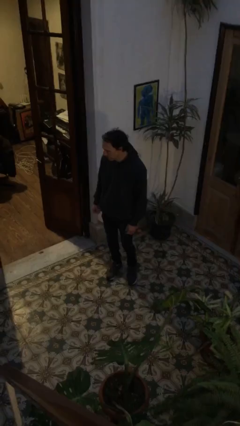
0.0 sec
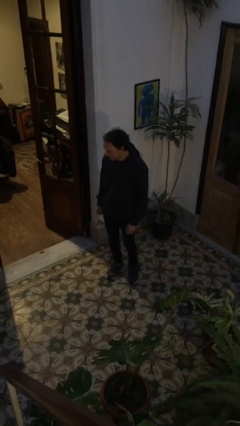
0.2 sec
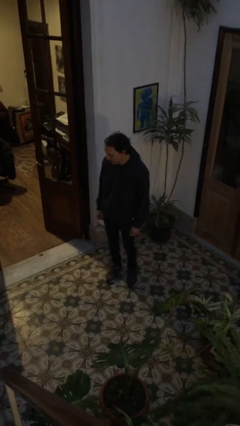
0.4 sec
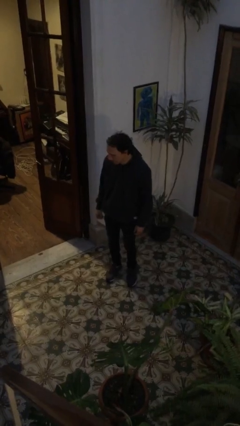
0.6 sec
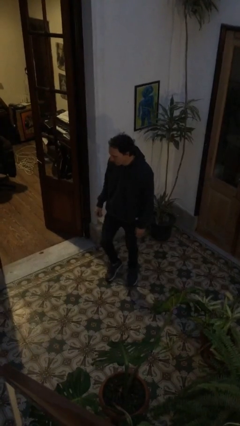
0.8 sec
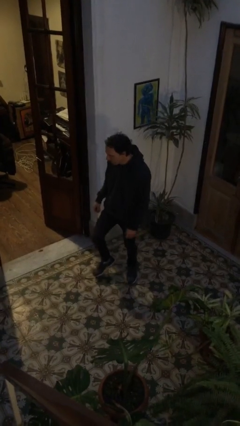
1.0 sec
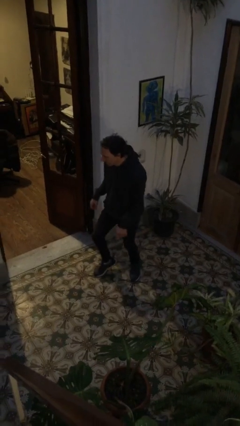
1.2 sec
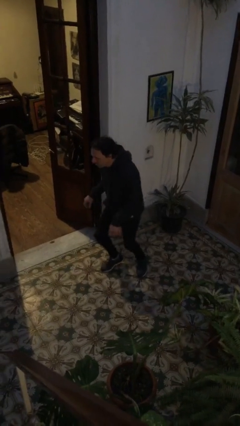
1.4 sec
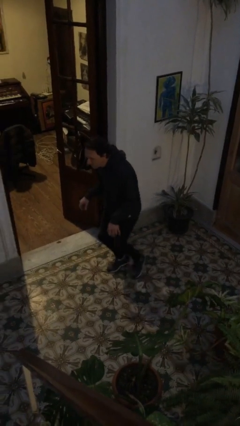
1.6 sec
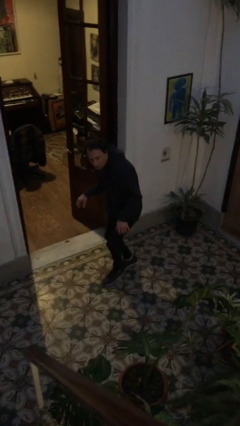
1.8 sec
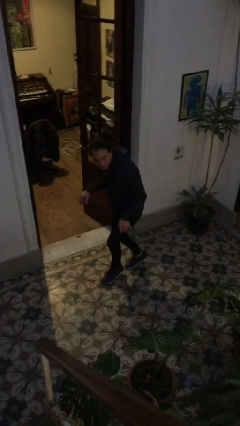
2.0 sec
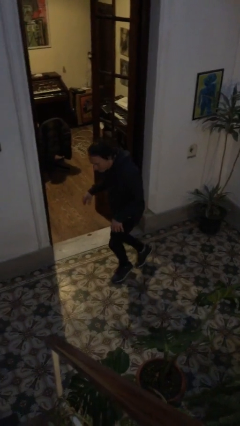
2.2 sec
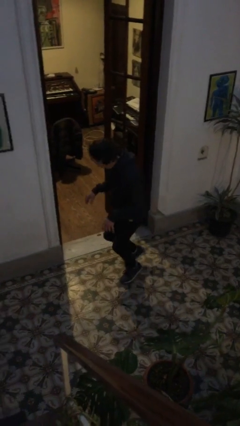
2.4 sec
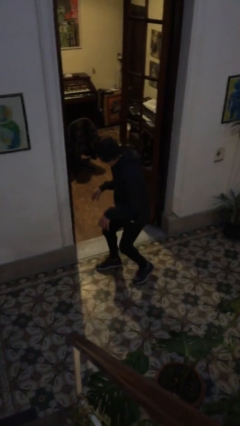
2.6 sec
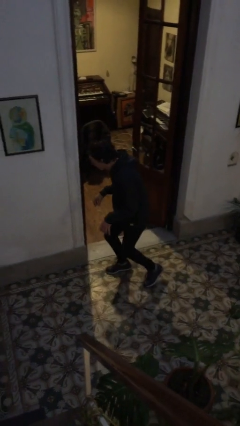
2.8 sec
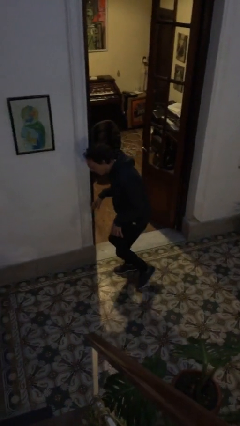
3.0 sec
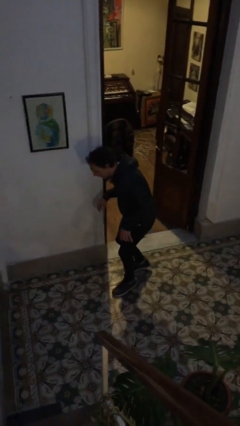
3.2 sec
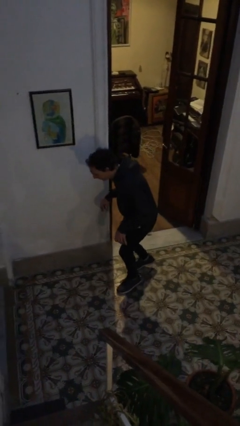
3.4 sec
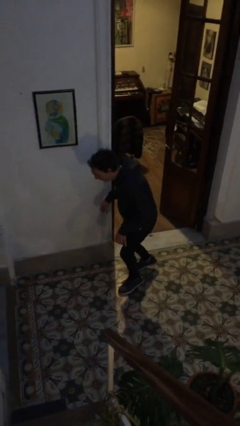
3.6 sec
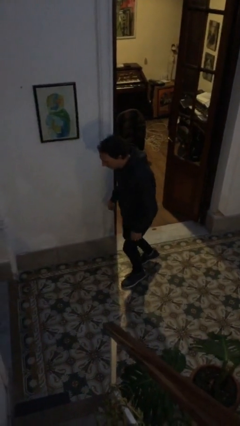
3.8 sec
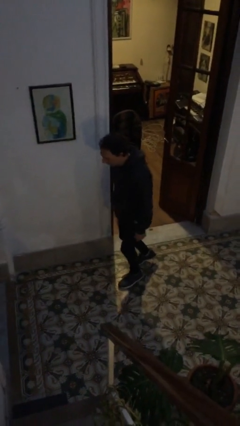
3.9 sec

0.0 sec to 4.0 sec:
person walks tiptoe

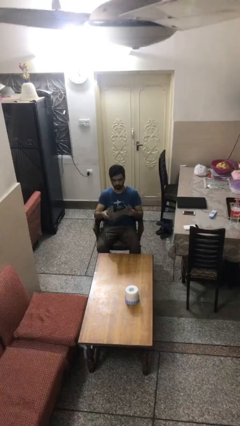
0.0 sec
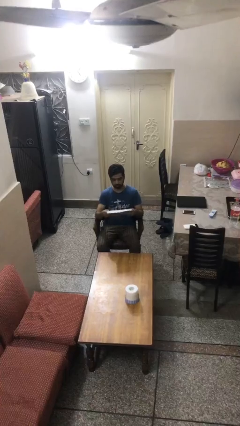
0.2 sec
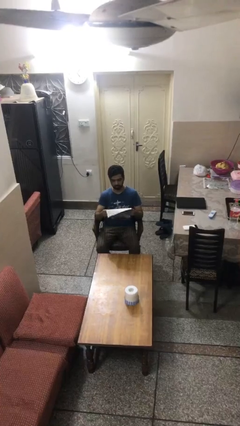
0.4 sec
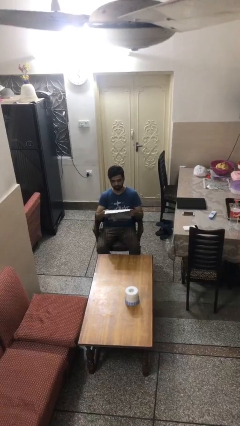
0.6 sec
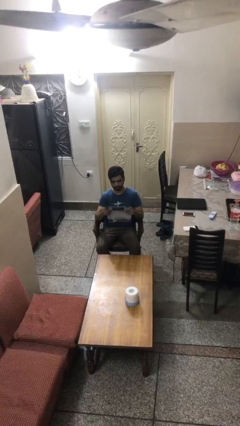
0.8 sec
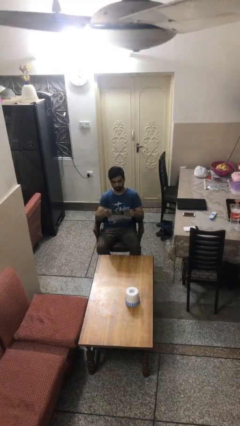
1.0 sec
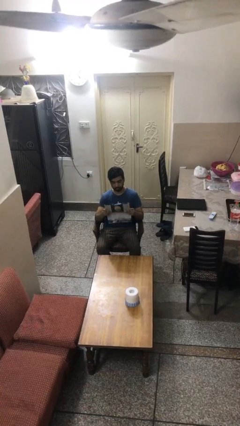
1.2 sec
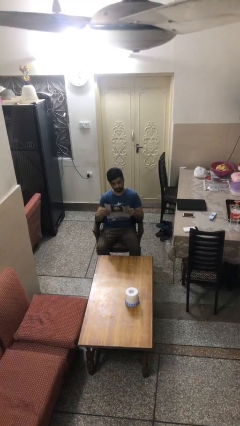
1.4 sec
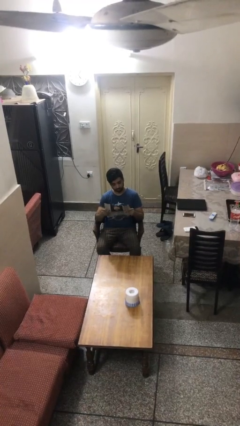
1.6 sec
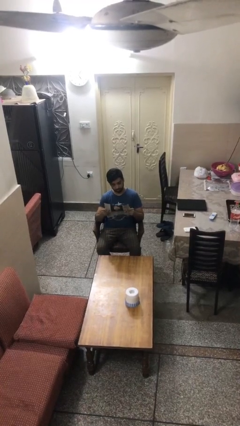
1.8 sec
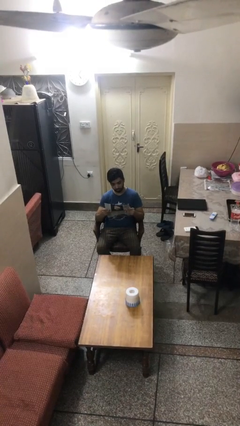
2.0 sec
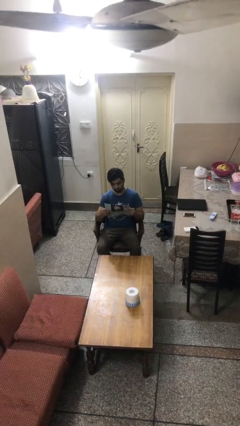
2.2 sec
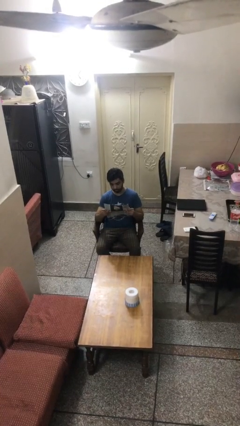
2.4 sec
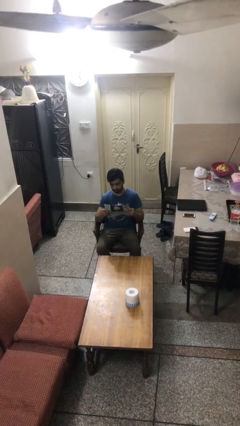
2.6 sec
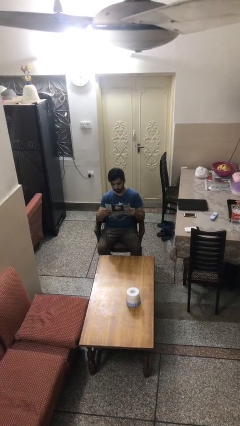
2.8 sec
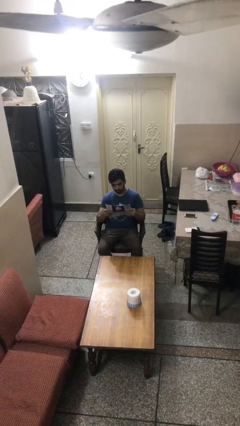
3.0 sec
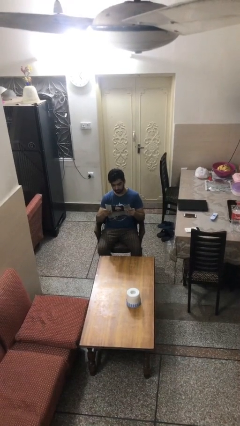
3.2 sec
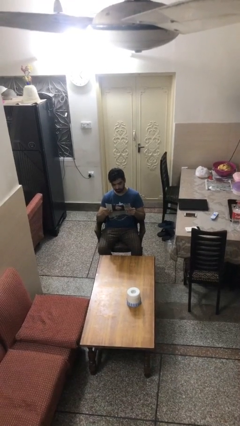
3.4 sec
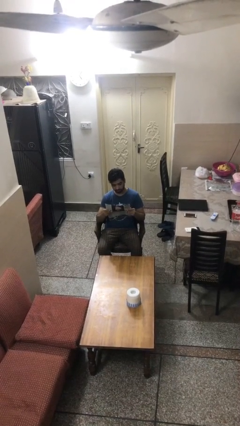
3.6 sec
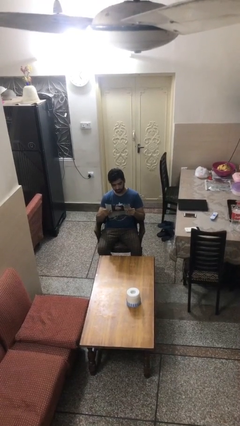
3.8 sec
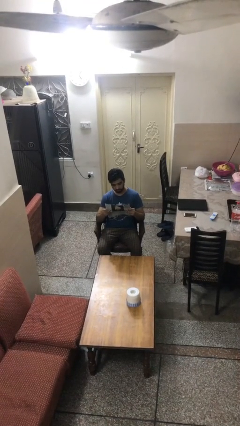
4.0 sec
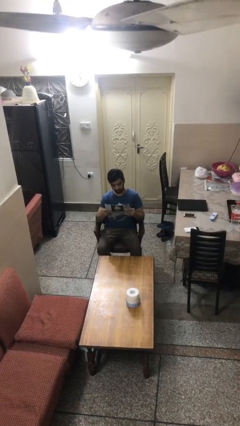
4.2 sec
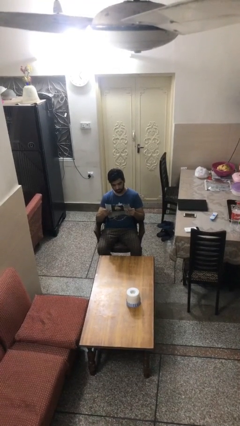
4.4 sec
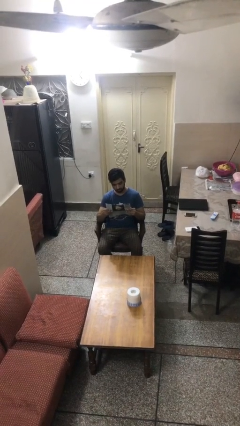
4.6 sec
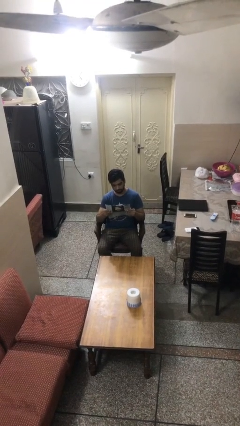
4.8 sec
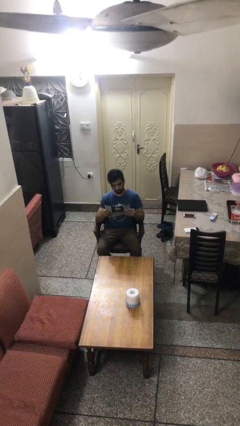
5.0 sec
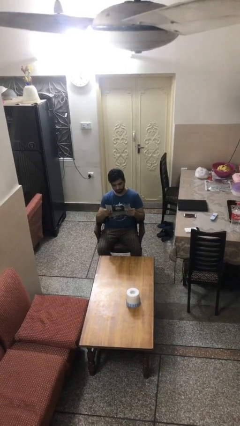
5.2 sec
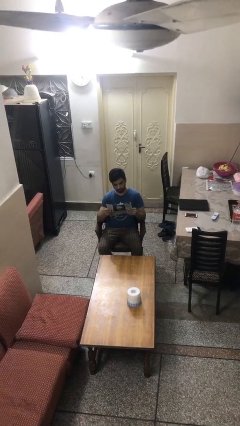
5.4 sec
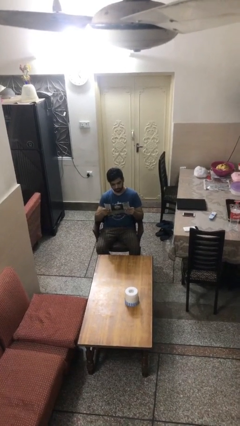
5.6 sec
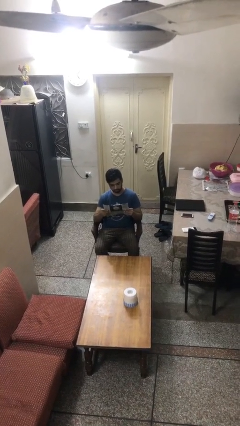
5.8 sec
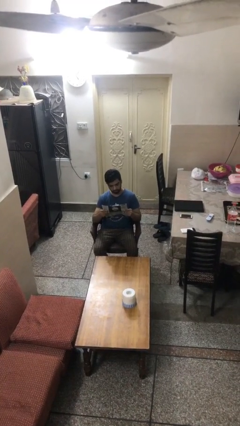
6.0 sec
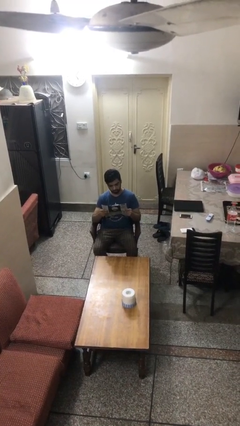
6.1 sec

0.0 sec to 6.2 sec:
person reads document

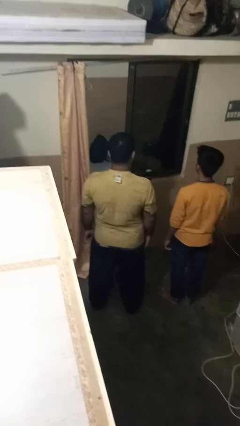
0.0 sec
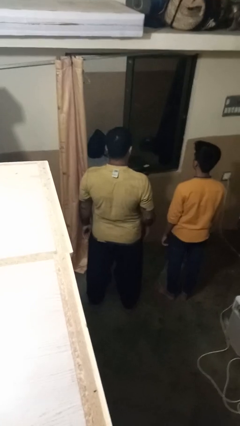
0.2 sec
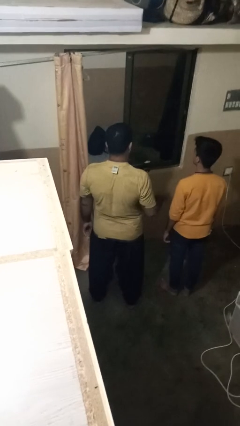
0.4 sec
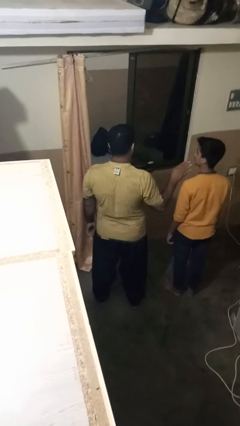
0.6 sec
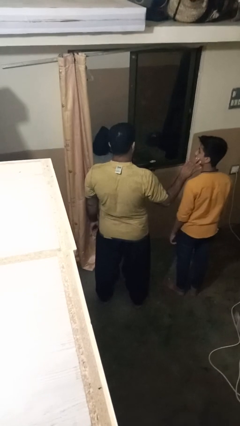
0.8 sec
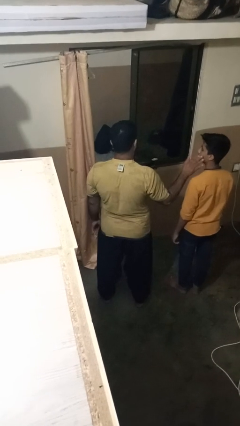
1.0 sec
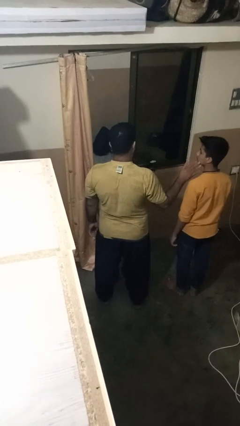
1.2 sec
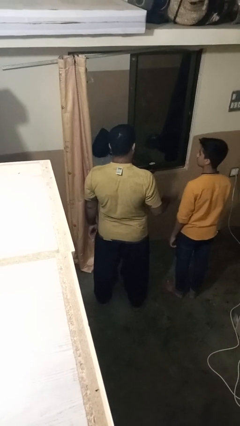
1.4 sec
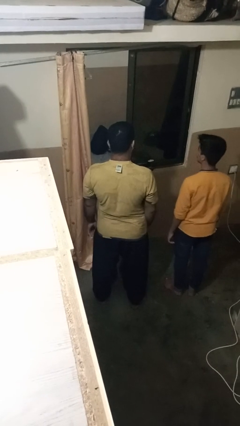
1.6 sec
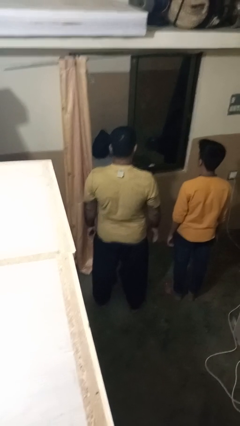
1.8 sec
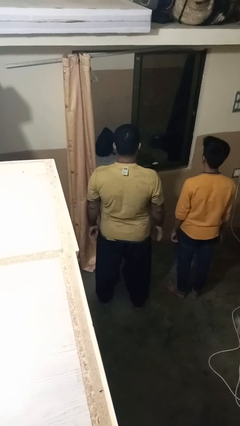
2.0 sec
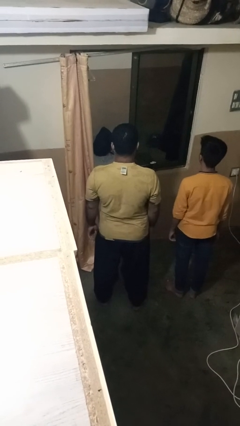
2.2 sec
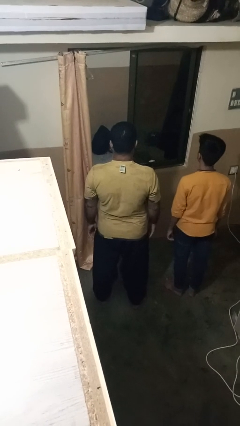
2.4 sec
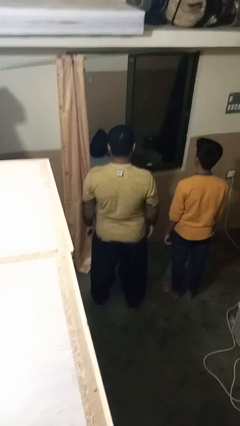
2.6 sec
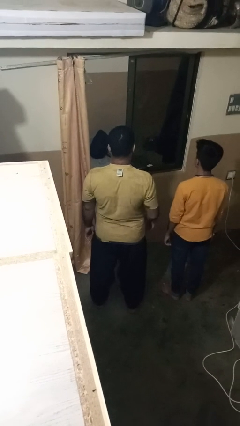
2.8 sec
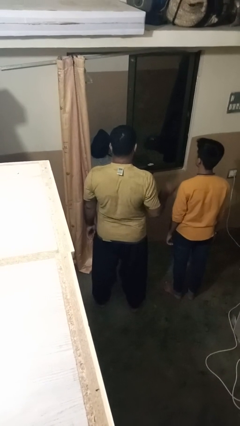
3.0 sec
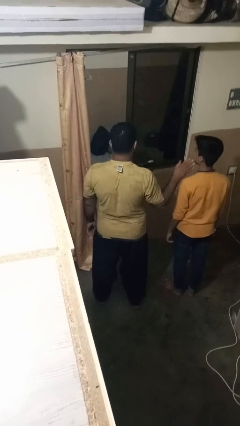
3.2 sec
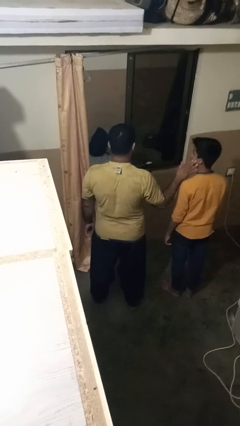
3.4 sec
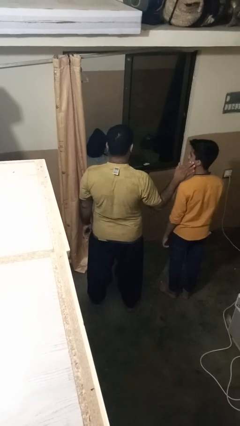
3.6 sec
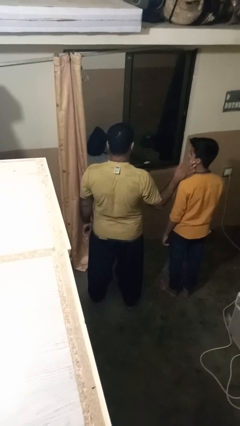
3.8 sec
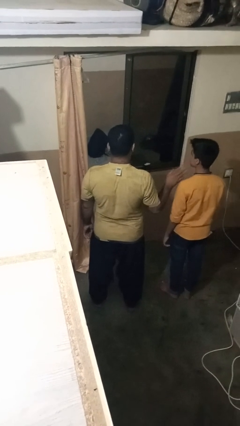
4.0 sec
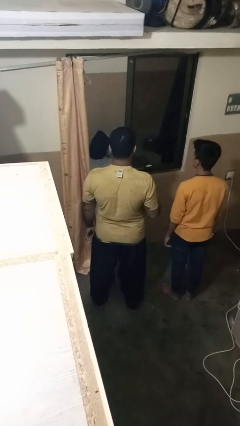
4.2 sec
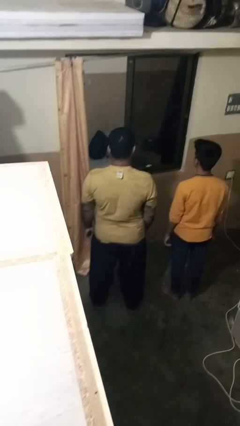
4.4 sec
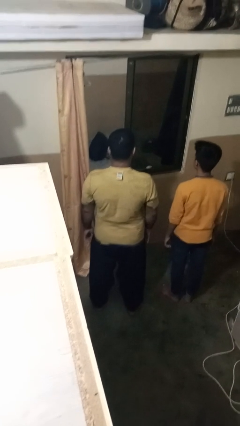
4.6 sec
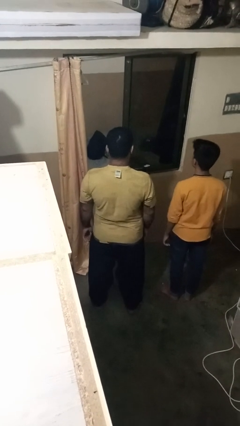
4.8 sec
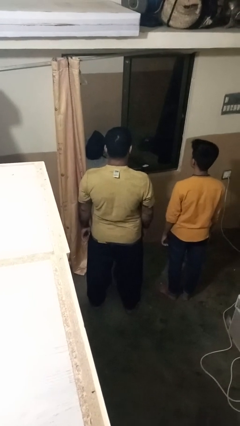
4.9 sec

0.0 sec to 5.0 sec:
person touches face of person

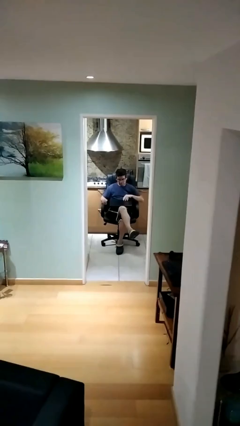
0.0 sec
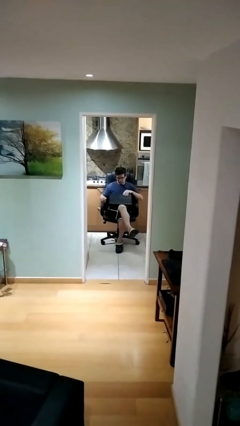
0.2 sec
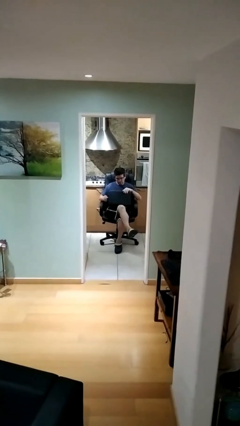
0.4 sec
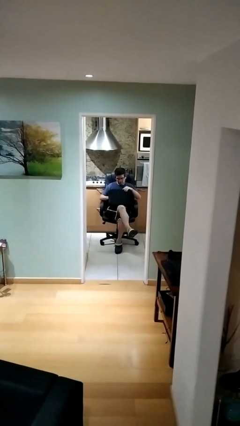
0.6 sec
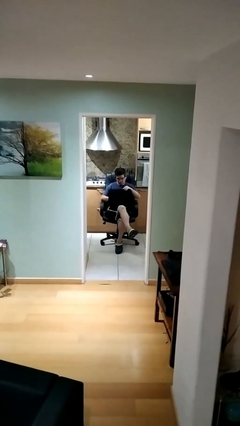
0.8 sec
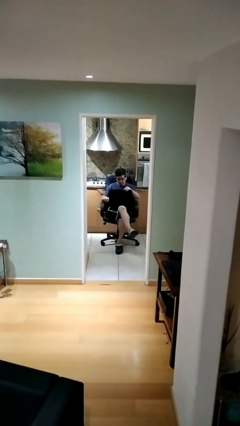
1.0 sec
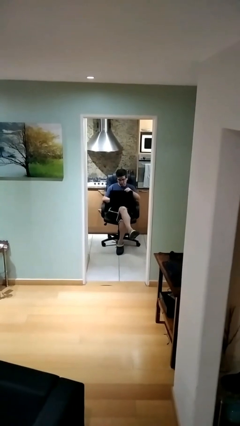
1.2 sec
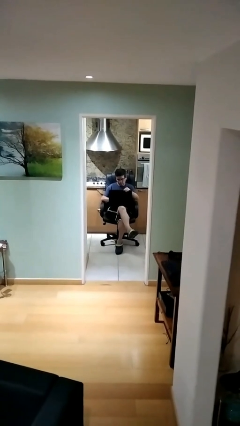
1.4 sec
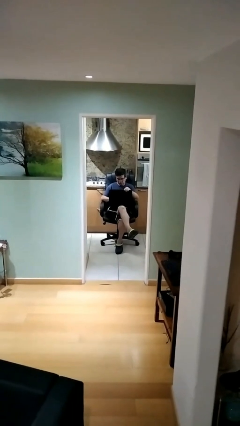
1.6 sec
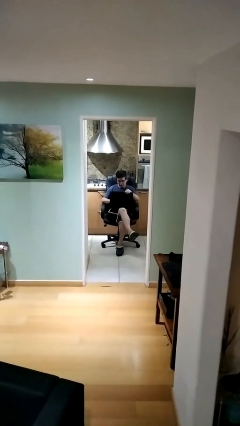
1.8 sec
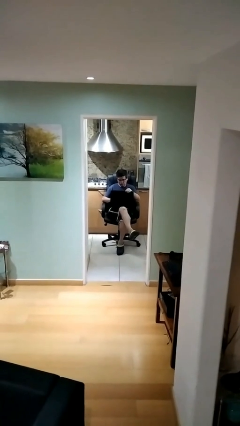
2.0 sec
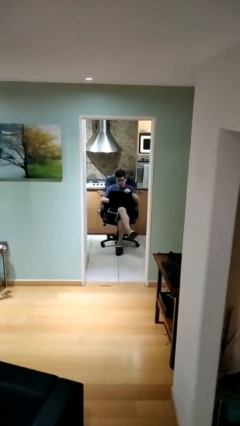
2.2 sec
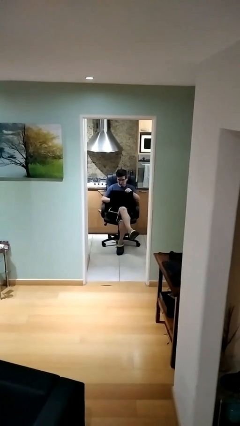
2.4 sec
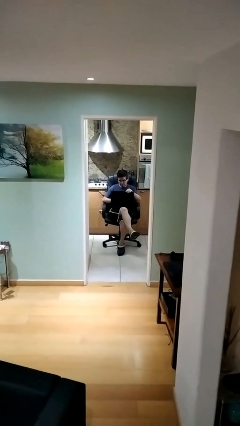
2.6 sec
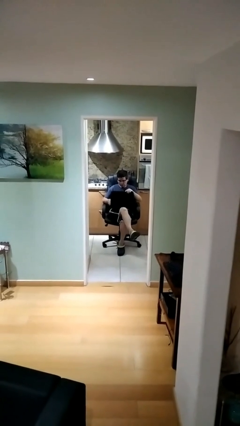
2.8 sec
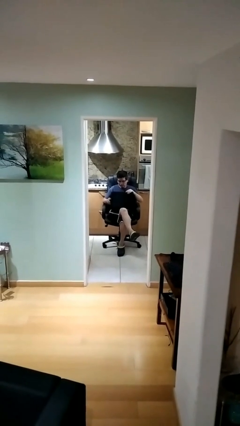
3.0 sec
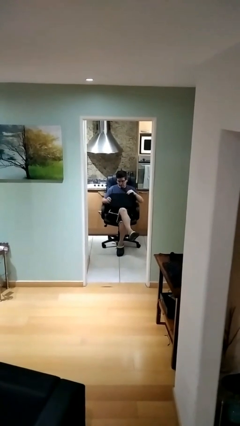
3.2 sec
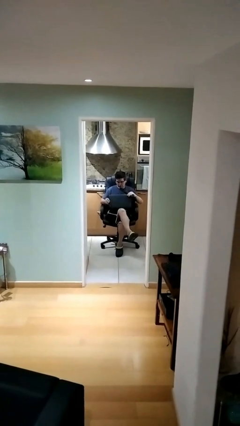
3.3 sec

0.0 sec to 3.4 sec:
person interacts with laptop
